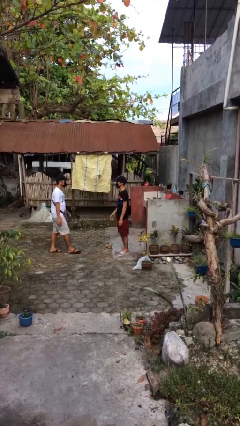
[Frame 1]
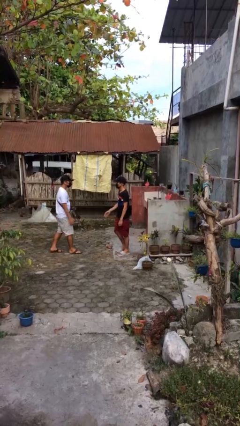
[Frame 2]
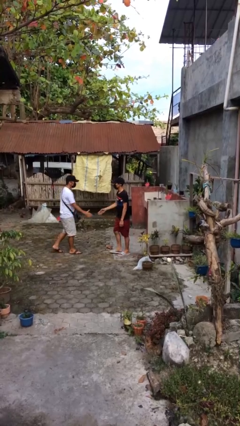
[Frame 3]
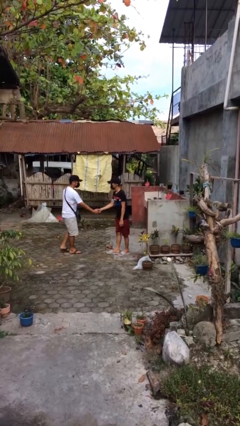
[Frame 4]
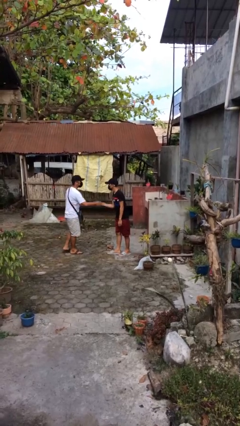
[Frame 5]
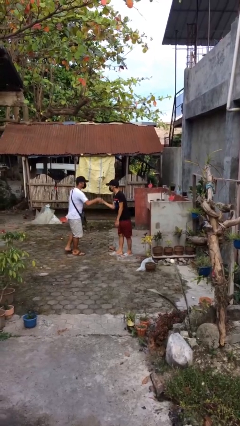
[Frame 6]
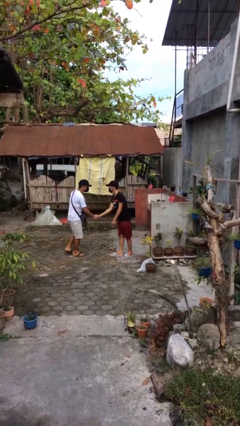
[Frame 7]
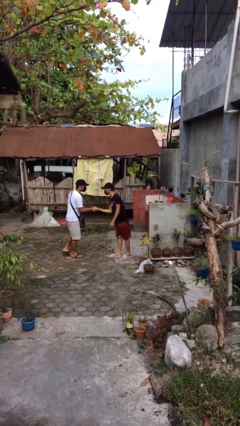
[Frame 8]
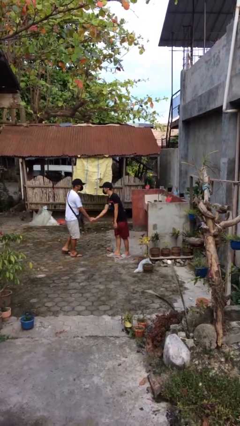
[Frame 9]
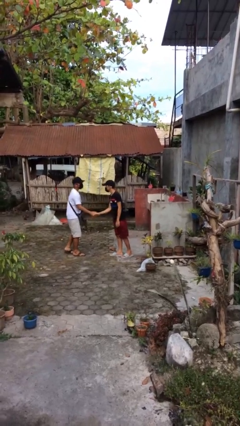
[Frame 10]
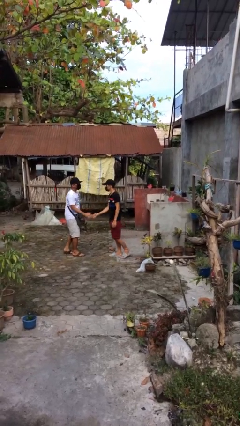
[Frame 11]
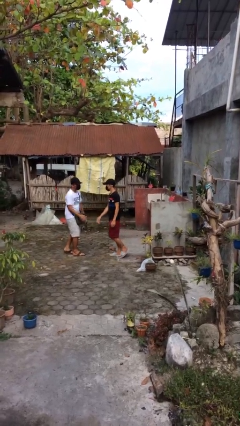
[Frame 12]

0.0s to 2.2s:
person shakes hand

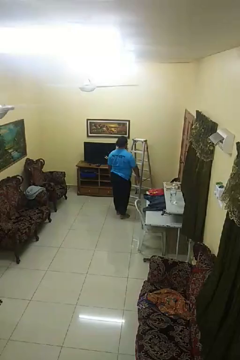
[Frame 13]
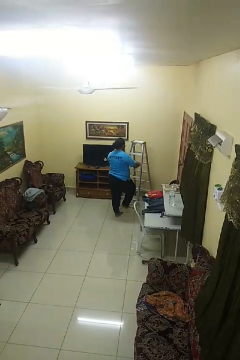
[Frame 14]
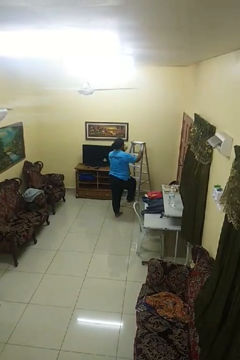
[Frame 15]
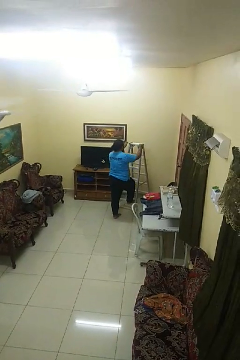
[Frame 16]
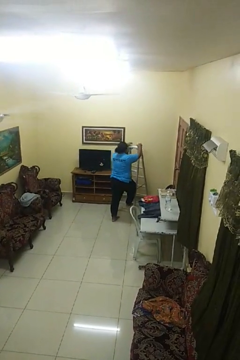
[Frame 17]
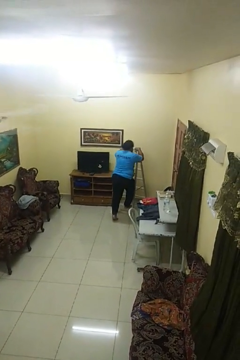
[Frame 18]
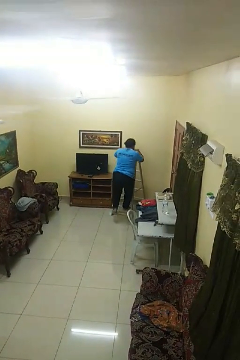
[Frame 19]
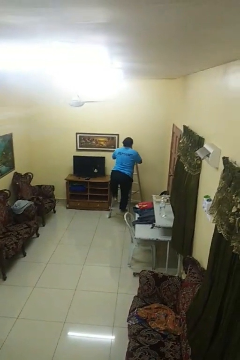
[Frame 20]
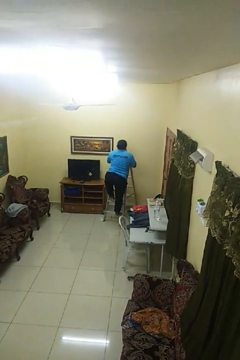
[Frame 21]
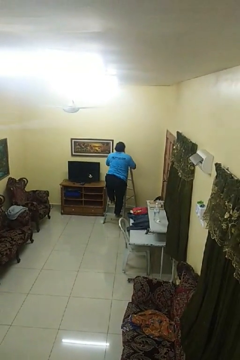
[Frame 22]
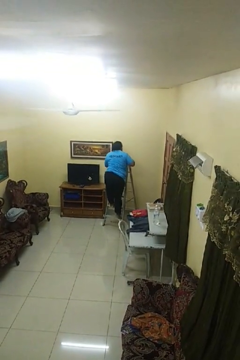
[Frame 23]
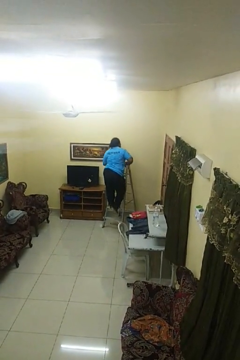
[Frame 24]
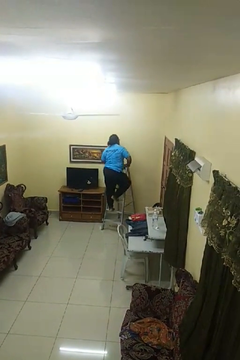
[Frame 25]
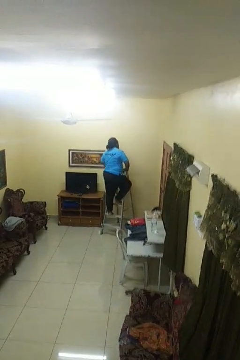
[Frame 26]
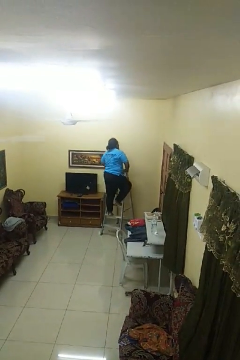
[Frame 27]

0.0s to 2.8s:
person climbs up ladder

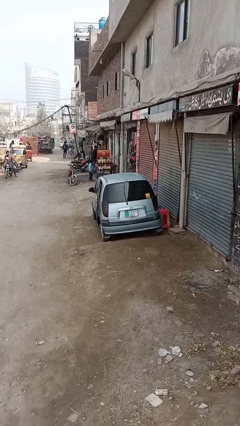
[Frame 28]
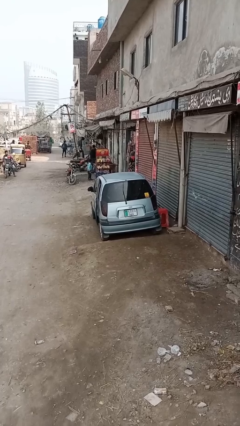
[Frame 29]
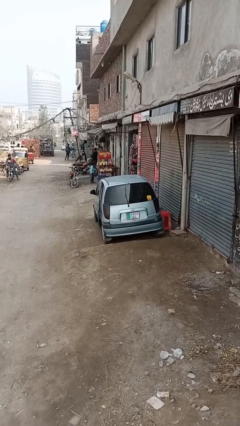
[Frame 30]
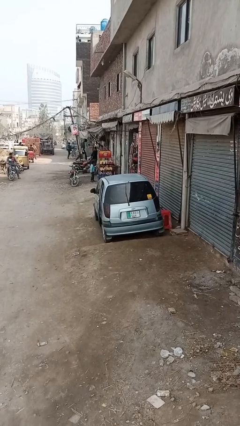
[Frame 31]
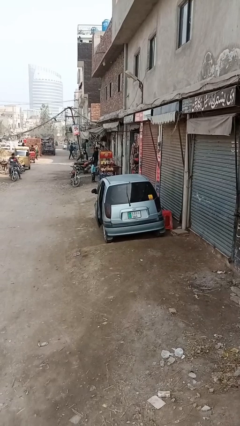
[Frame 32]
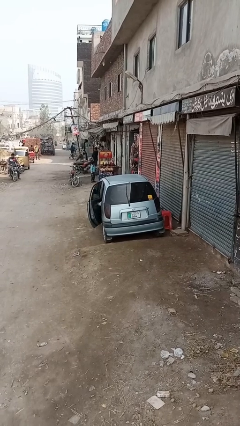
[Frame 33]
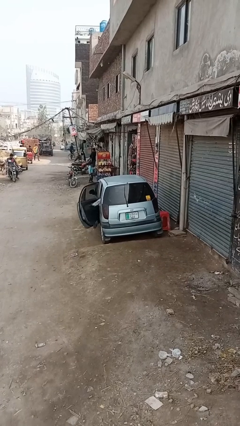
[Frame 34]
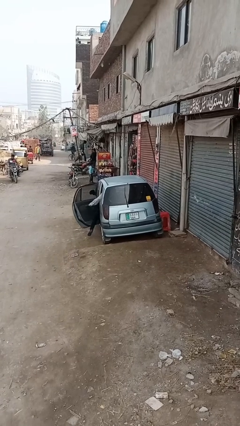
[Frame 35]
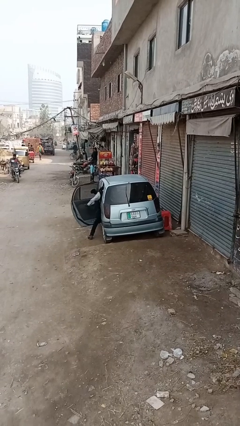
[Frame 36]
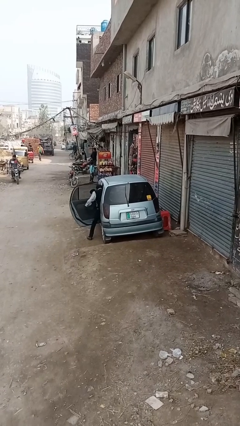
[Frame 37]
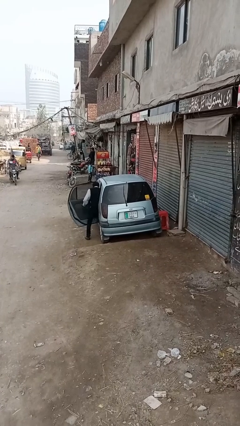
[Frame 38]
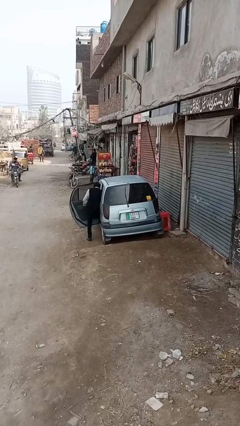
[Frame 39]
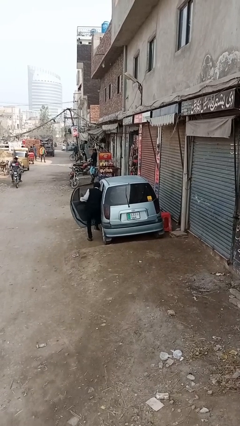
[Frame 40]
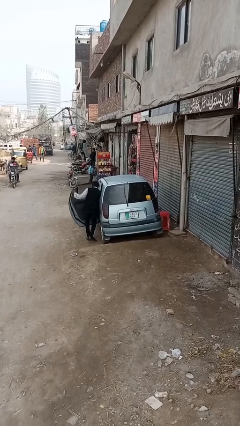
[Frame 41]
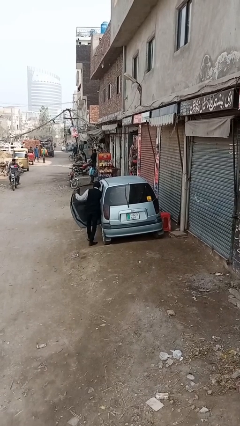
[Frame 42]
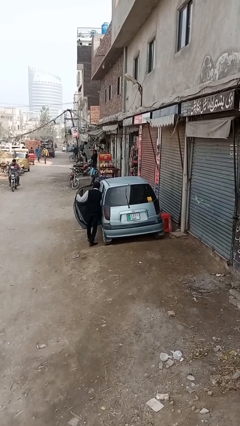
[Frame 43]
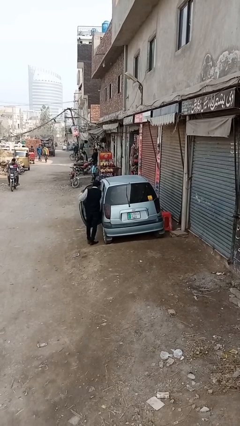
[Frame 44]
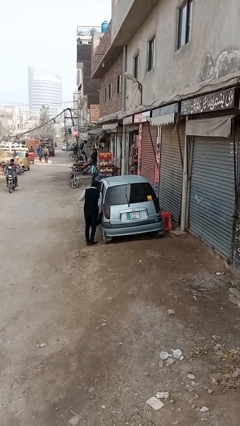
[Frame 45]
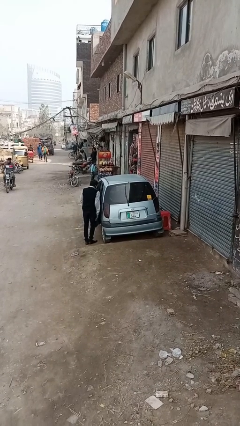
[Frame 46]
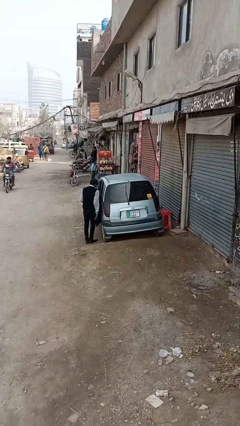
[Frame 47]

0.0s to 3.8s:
car drops off person

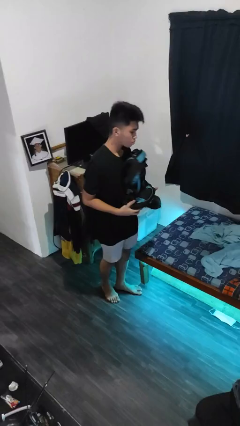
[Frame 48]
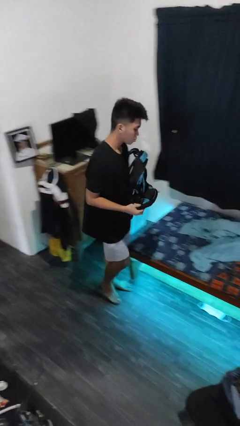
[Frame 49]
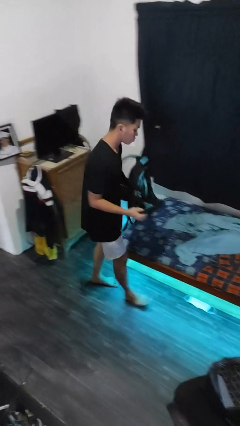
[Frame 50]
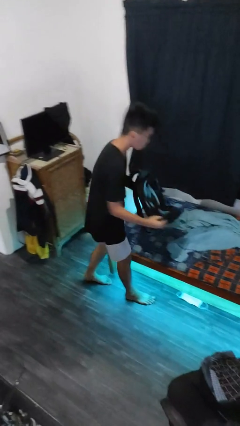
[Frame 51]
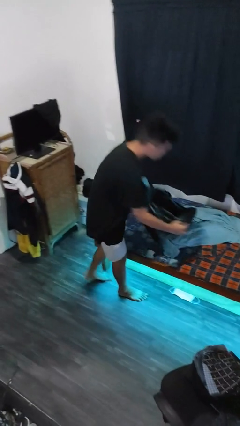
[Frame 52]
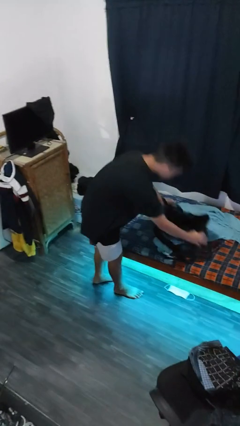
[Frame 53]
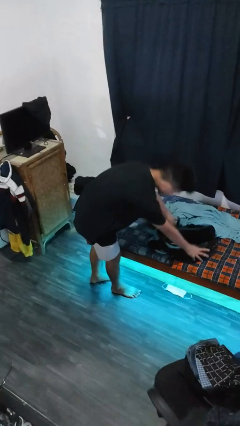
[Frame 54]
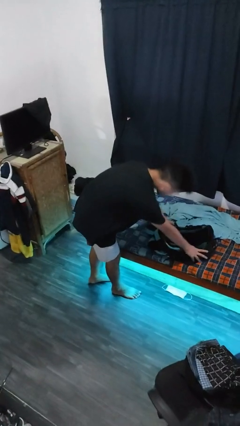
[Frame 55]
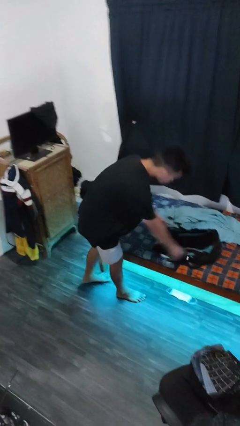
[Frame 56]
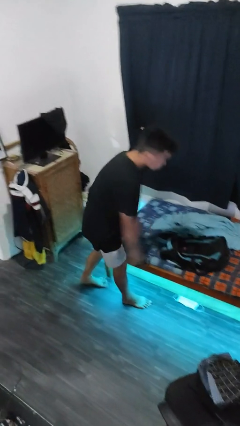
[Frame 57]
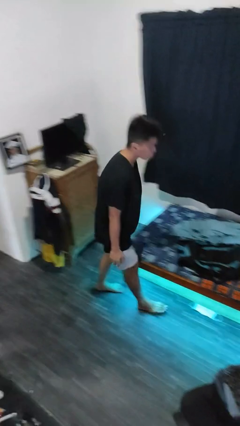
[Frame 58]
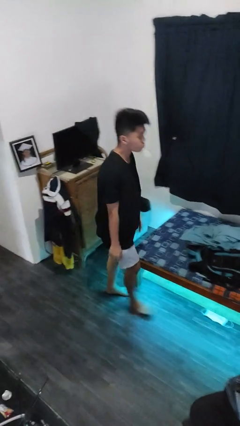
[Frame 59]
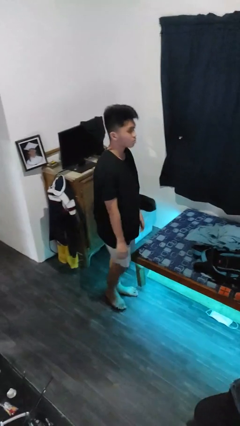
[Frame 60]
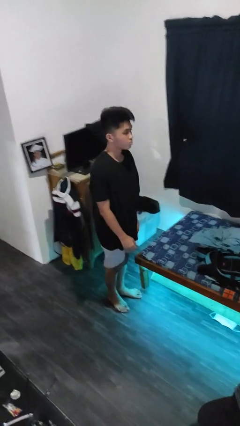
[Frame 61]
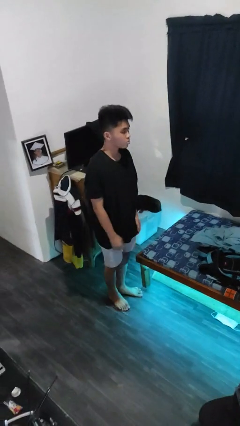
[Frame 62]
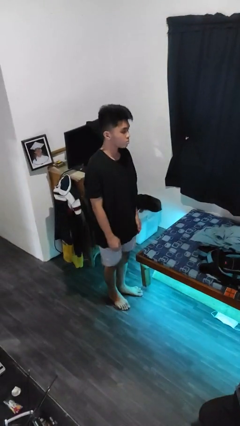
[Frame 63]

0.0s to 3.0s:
person puts down object on bed

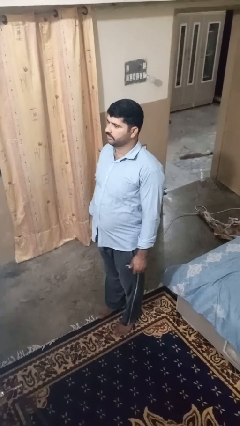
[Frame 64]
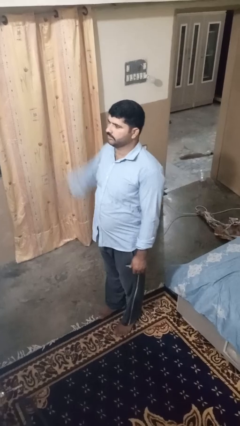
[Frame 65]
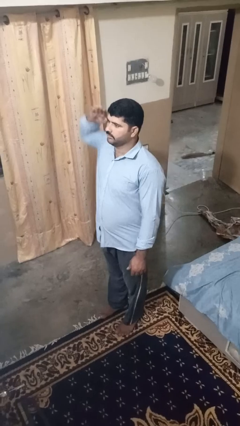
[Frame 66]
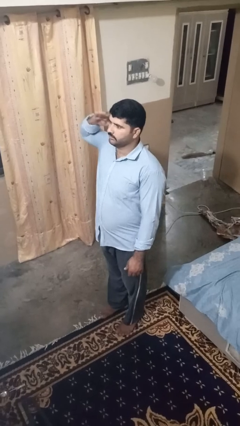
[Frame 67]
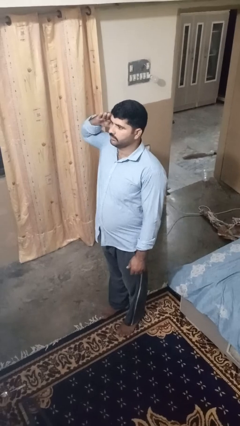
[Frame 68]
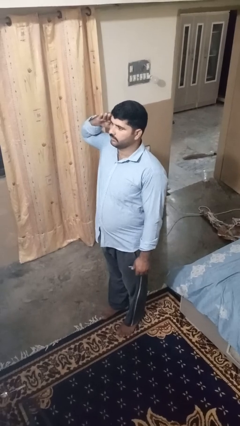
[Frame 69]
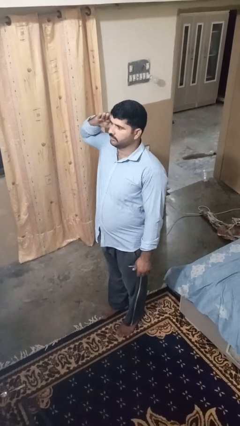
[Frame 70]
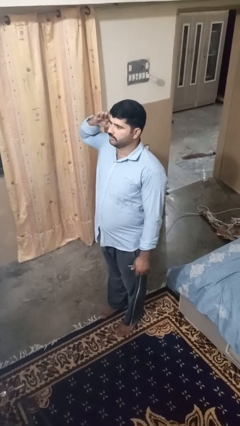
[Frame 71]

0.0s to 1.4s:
person salutes

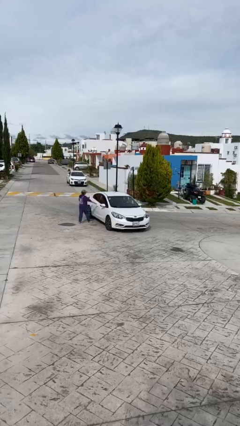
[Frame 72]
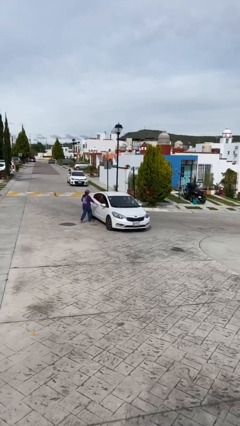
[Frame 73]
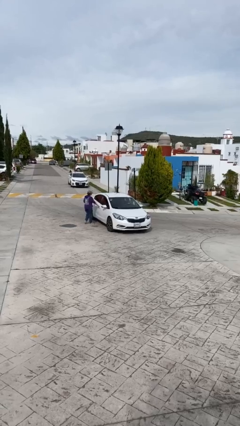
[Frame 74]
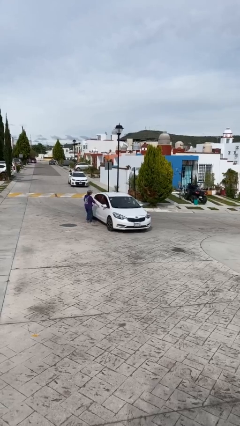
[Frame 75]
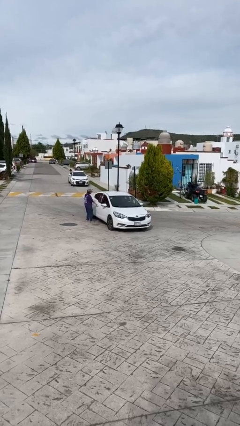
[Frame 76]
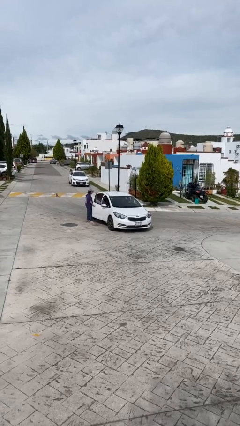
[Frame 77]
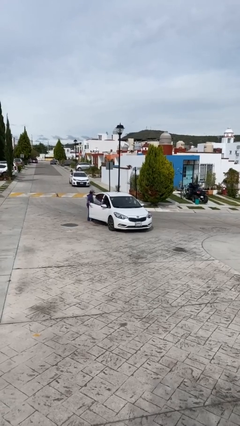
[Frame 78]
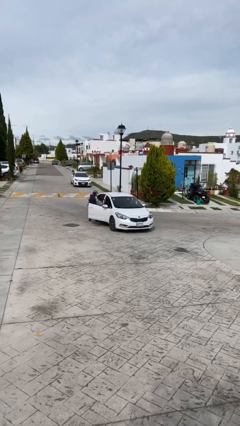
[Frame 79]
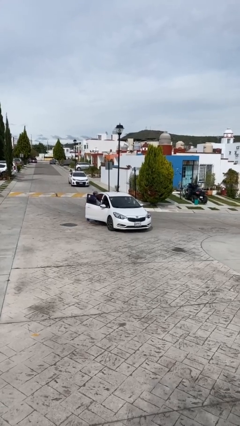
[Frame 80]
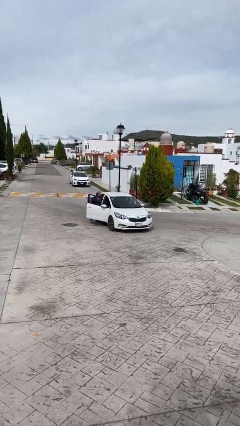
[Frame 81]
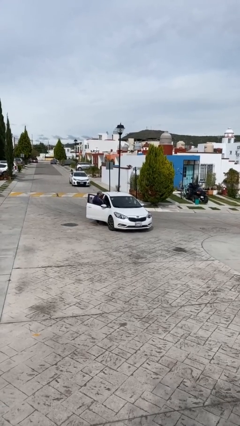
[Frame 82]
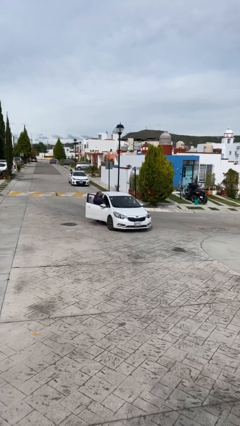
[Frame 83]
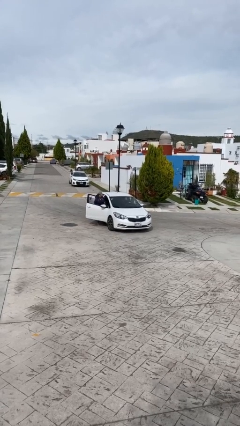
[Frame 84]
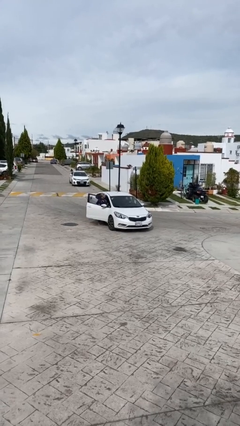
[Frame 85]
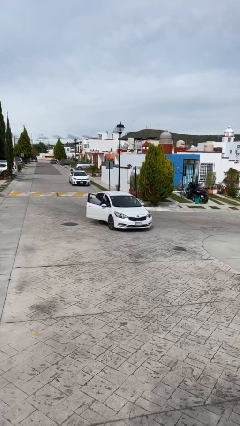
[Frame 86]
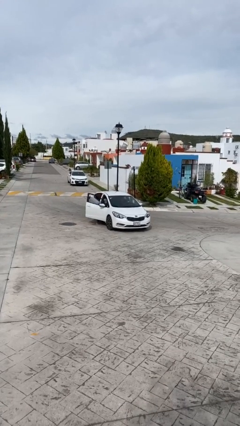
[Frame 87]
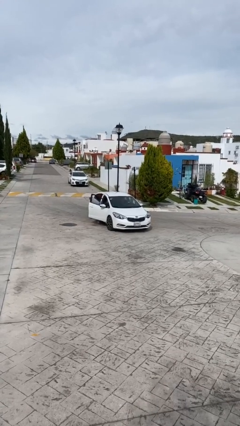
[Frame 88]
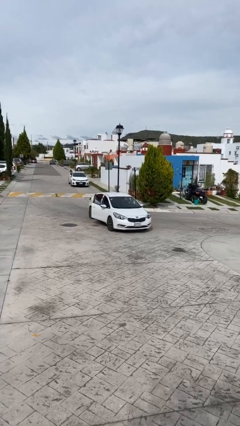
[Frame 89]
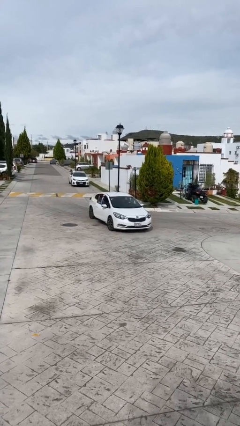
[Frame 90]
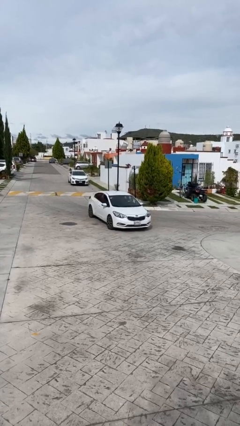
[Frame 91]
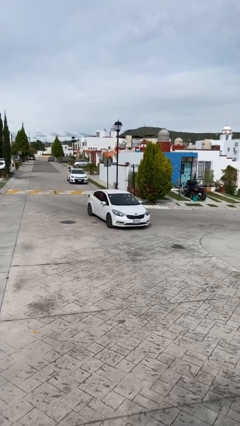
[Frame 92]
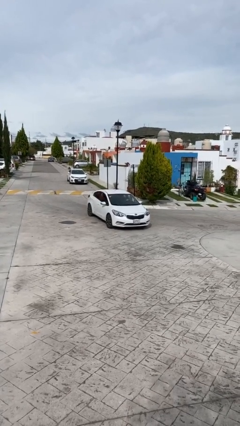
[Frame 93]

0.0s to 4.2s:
car picks up person

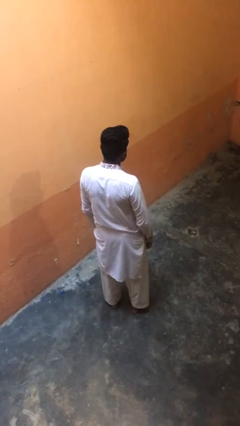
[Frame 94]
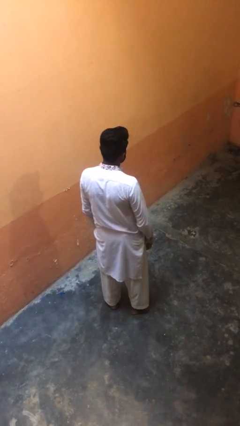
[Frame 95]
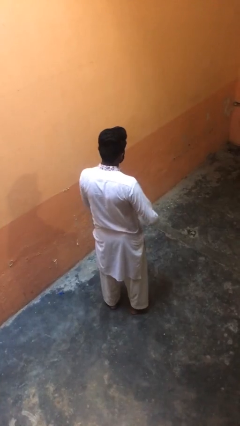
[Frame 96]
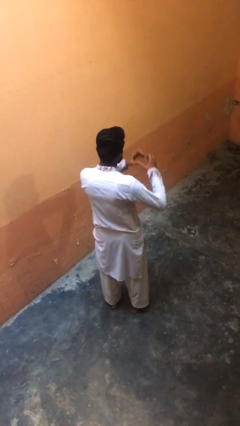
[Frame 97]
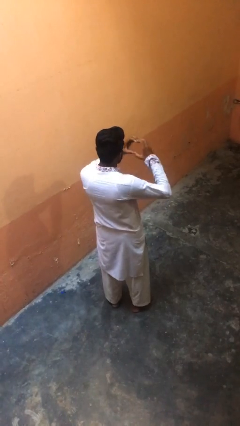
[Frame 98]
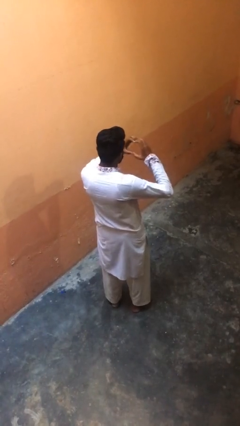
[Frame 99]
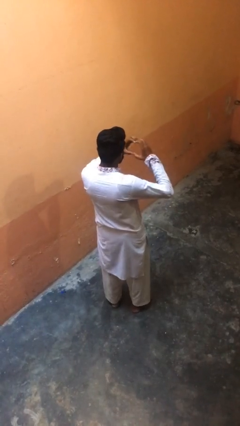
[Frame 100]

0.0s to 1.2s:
person gestures heart
